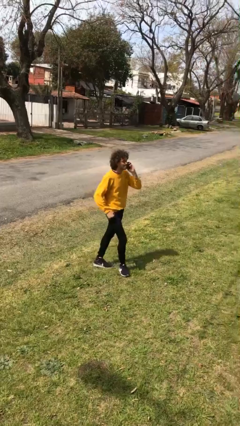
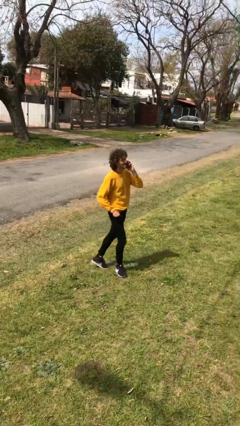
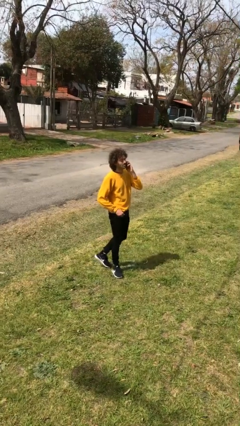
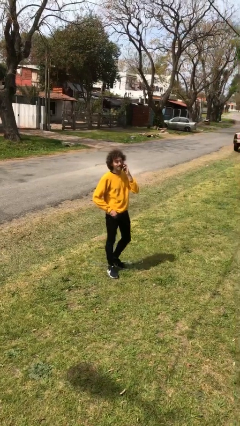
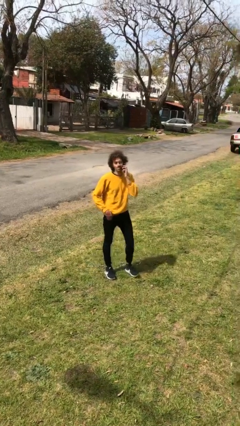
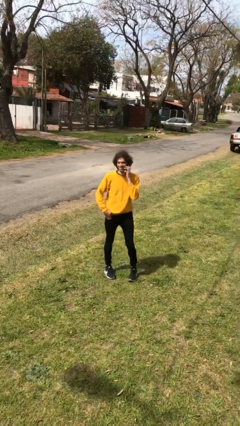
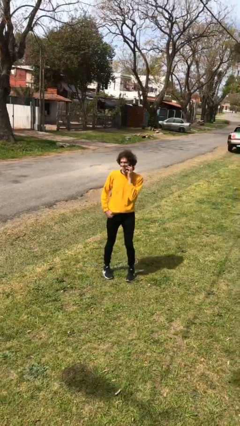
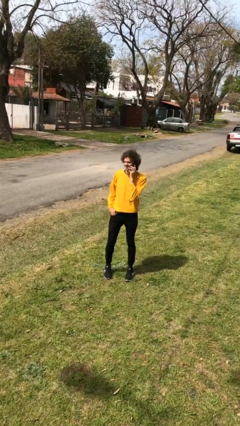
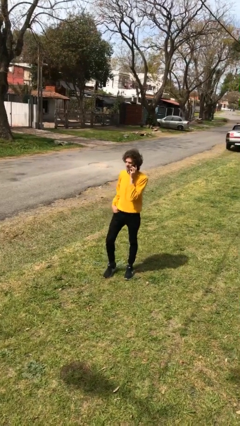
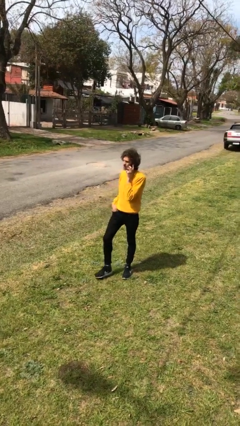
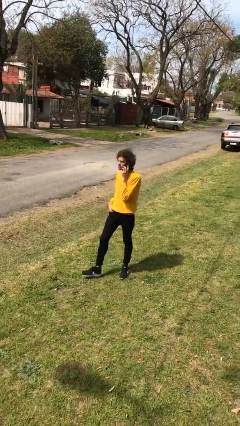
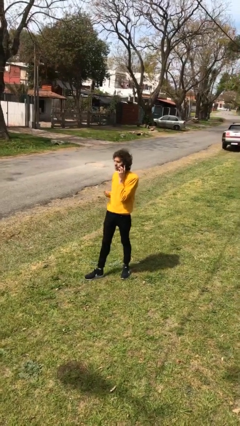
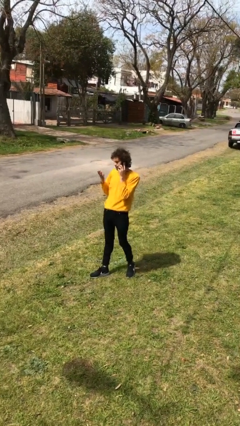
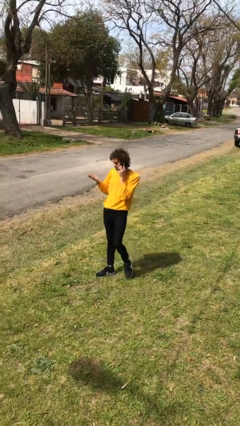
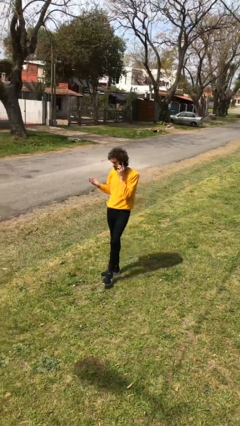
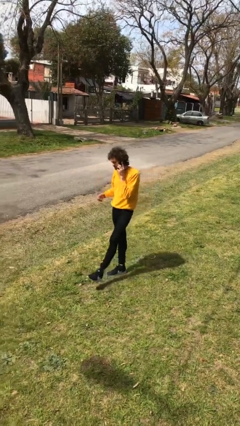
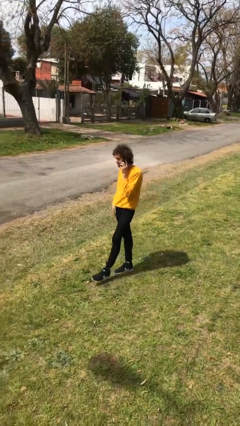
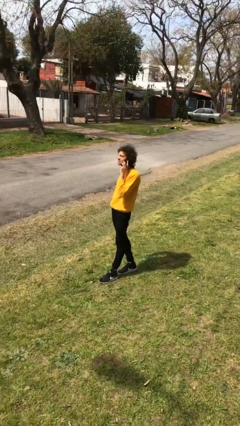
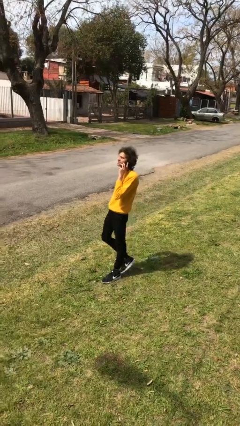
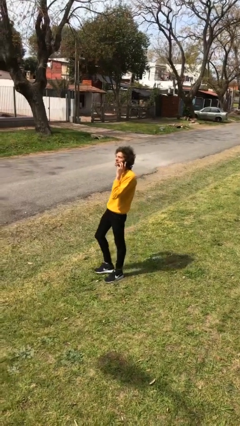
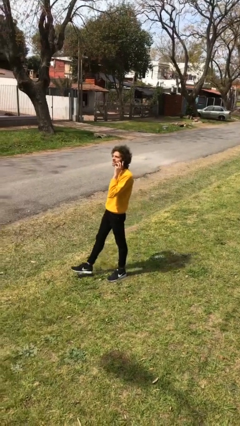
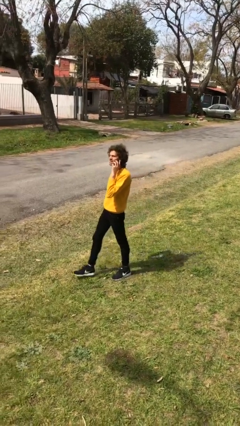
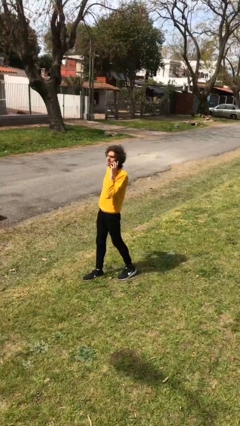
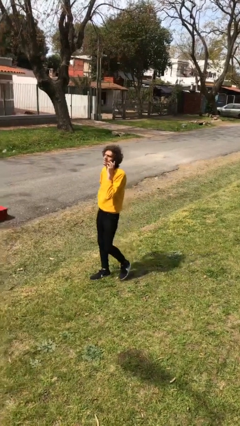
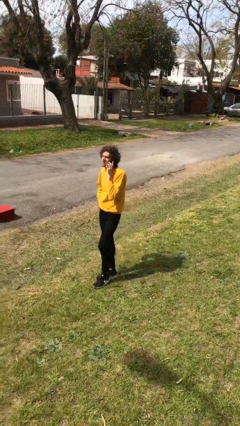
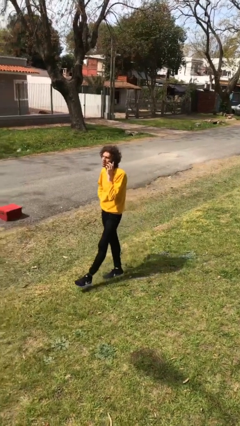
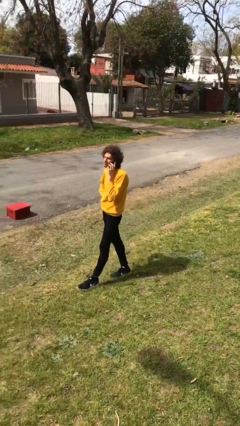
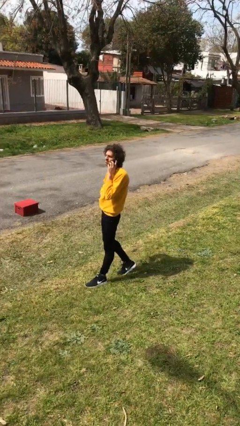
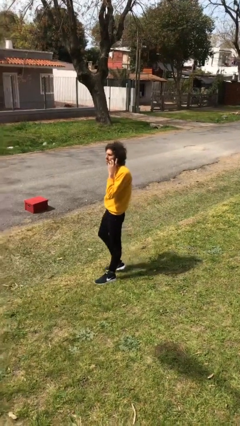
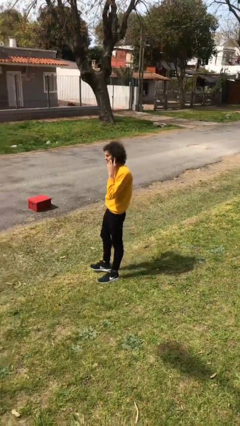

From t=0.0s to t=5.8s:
person talks on phone

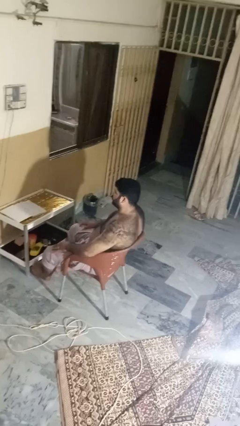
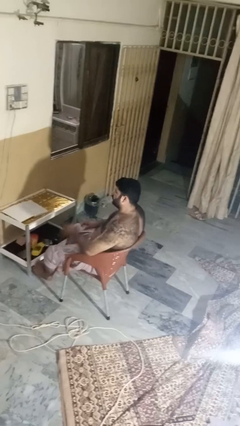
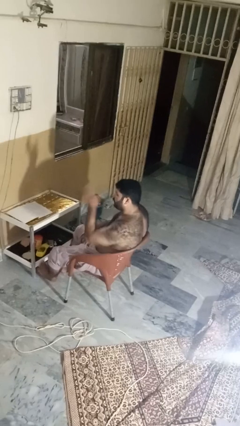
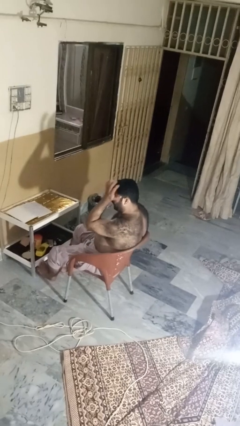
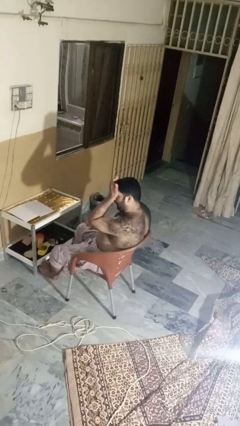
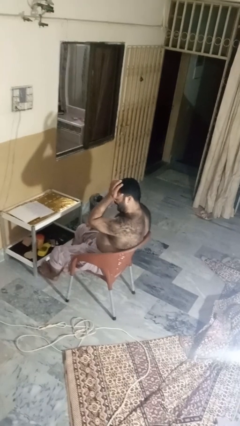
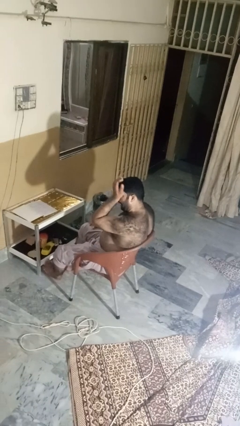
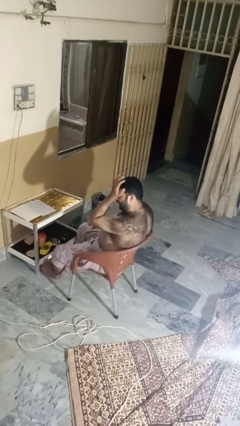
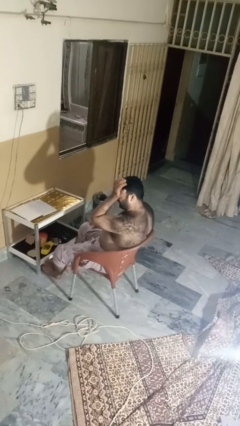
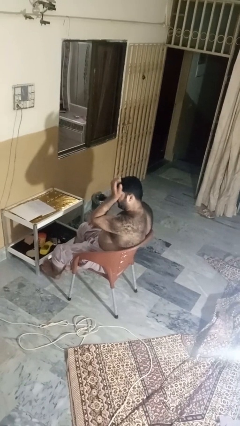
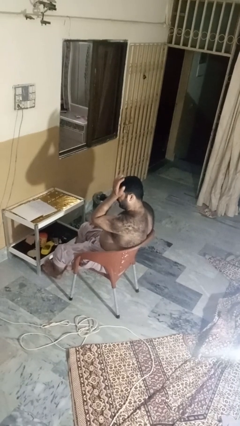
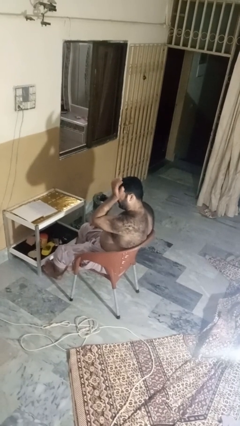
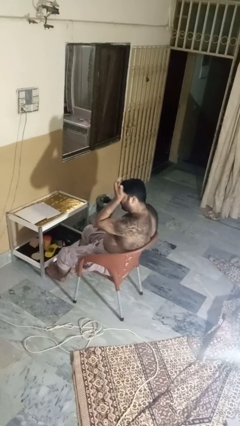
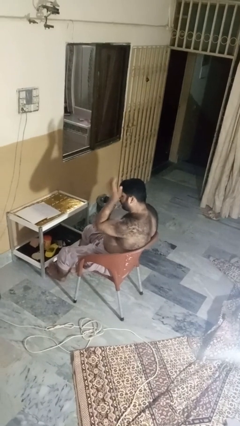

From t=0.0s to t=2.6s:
person rubs eyes

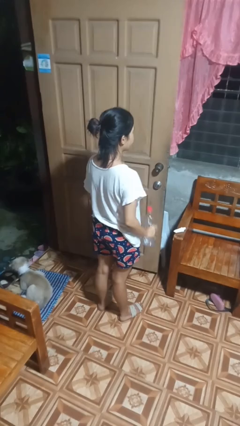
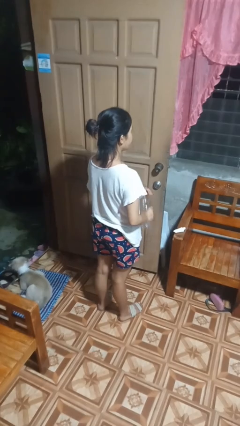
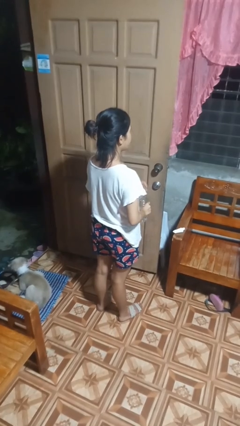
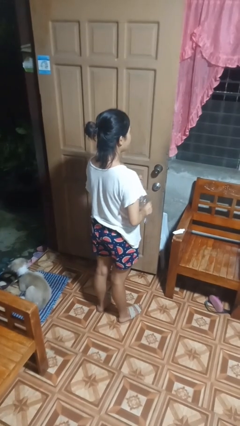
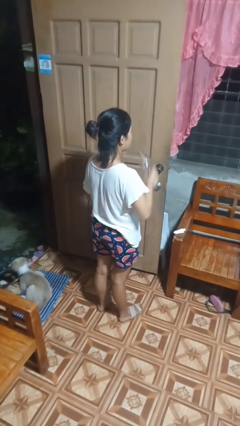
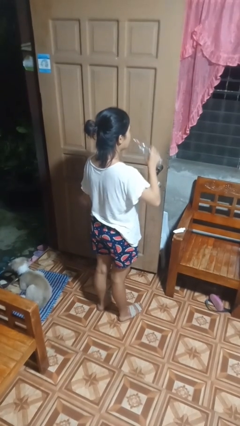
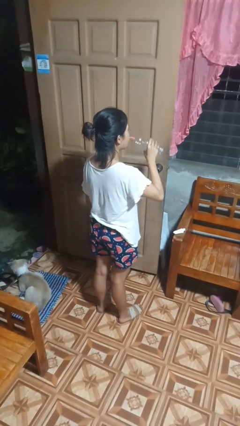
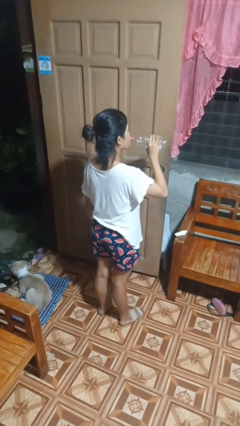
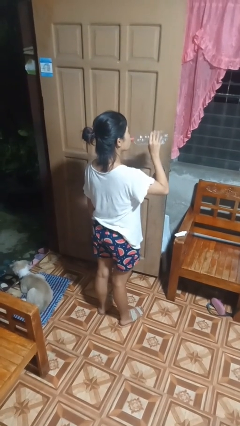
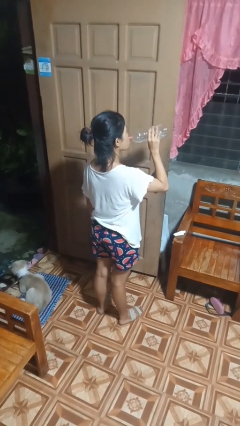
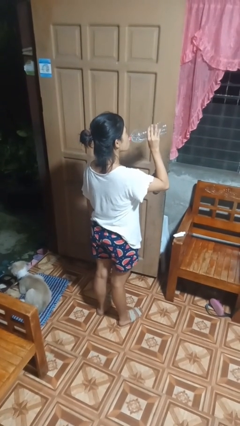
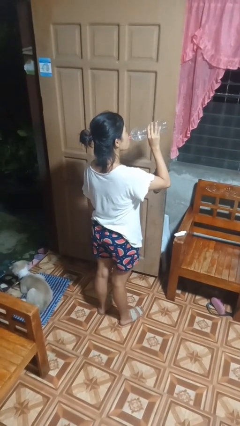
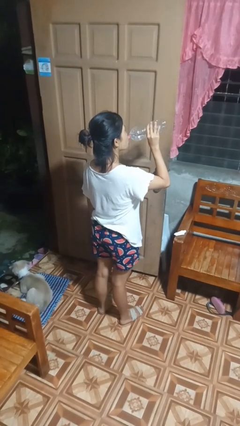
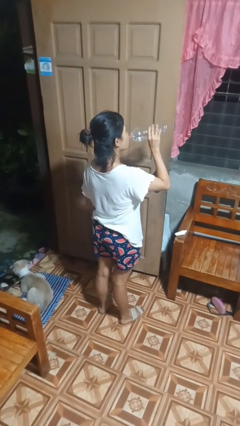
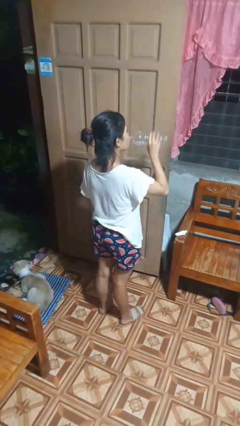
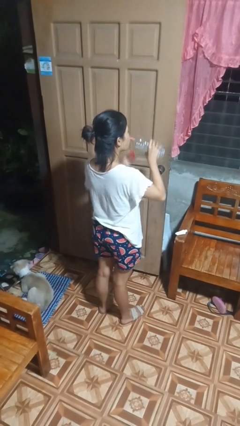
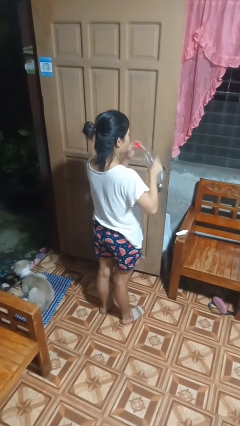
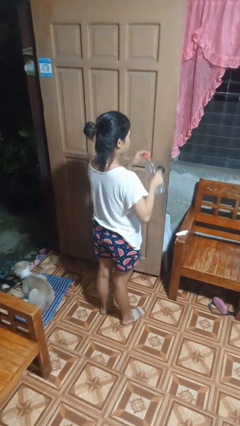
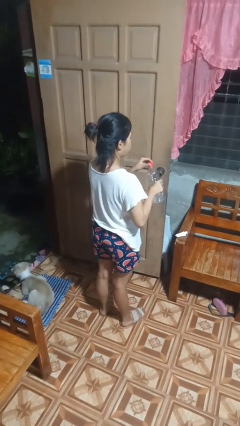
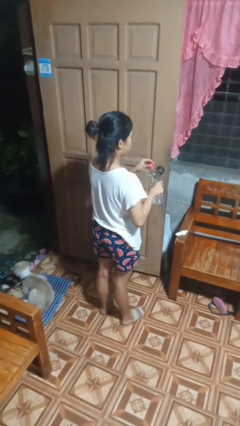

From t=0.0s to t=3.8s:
person drinks from bottle

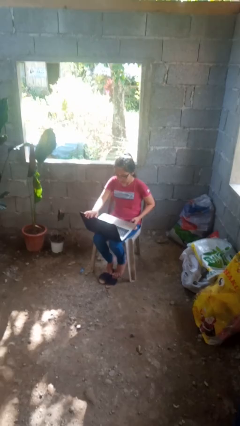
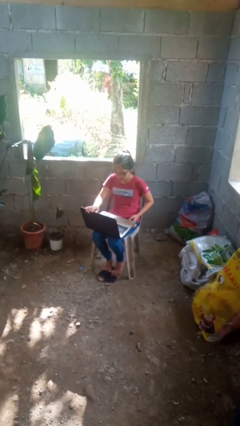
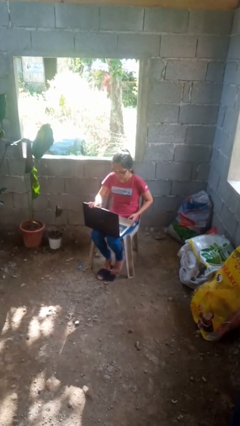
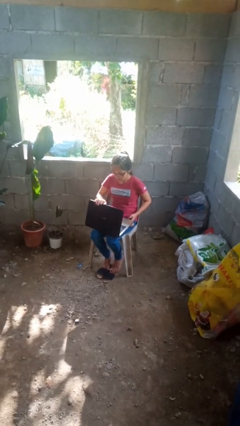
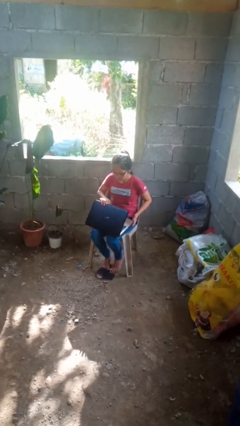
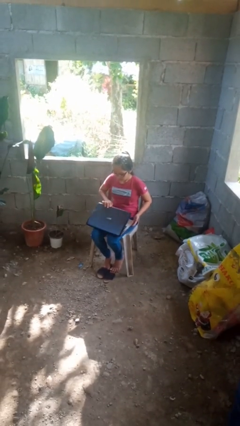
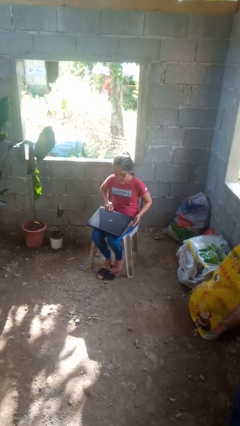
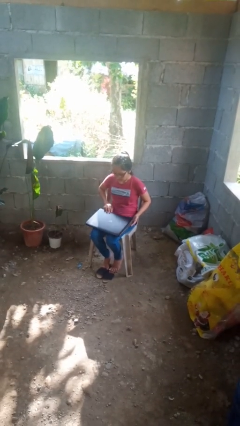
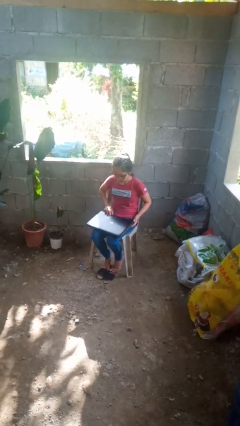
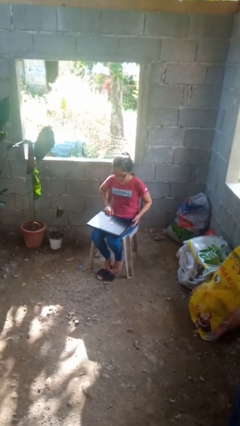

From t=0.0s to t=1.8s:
person closes laptop

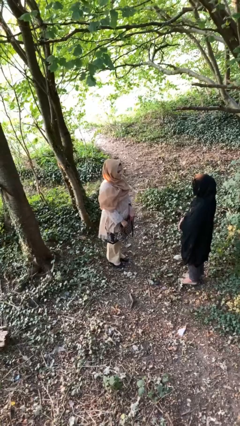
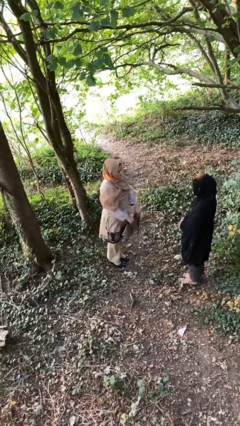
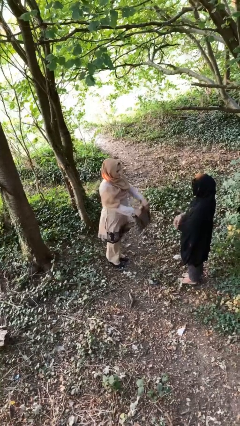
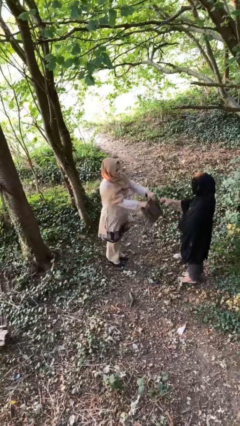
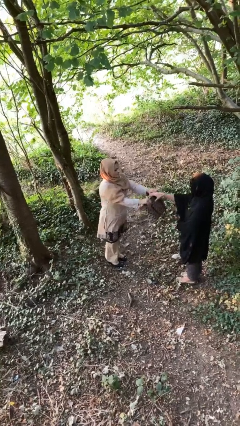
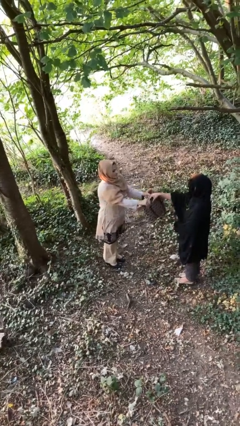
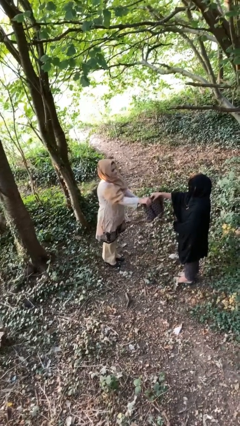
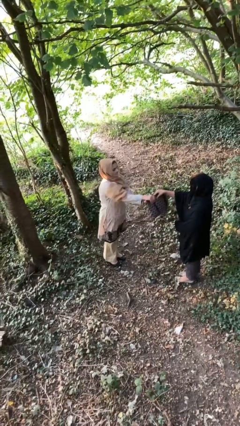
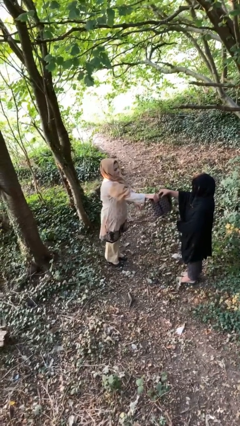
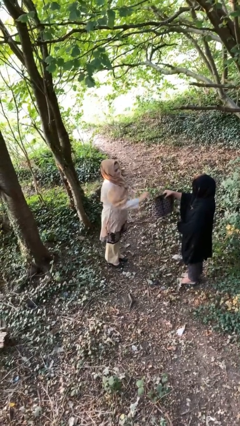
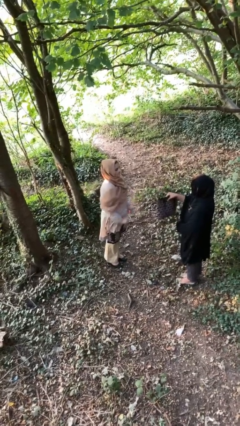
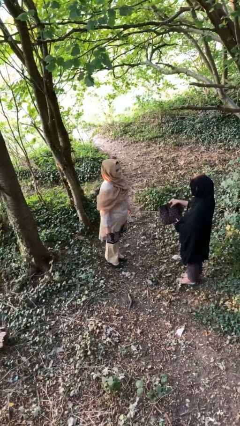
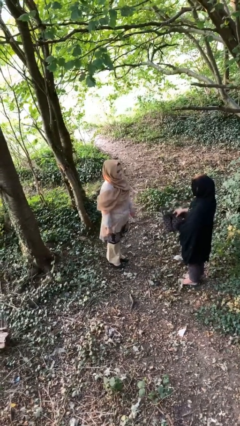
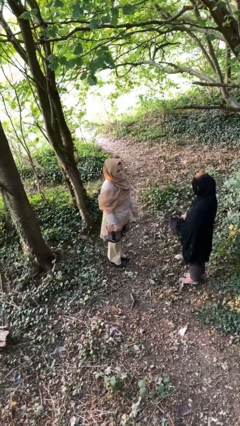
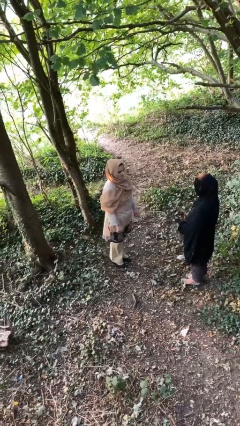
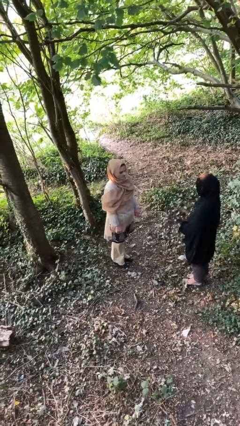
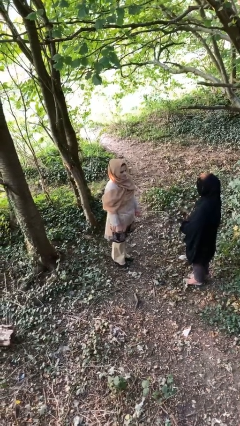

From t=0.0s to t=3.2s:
person transfers object to person

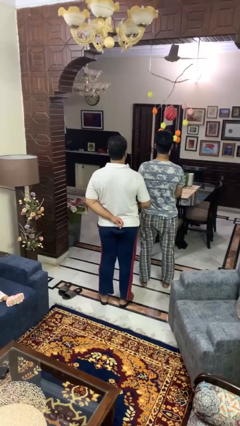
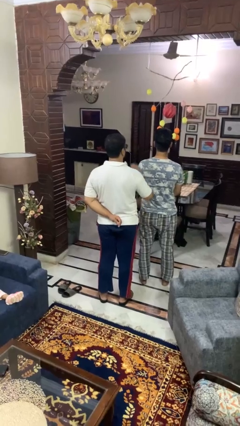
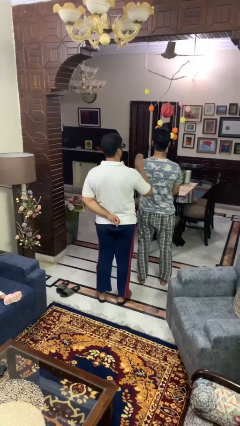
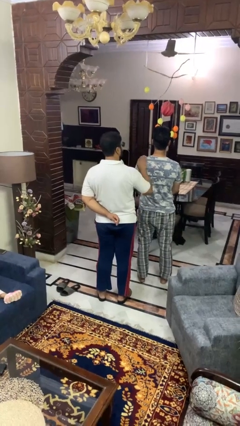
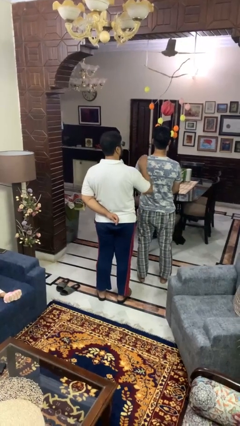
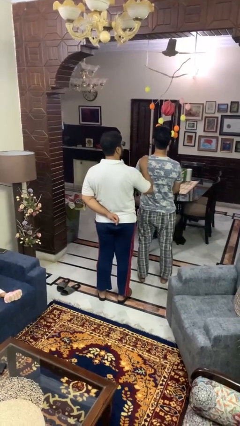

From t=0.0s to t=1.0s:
person pounds shoulders of person
